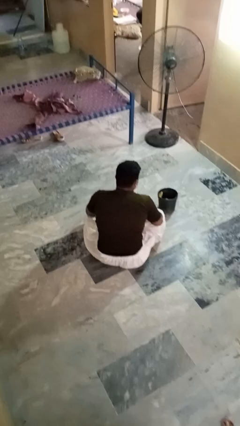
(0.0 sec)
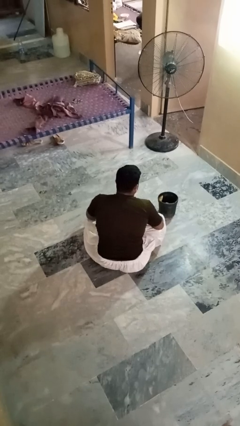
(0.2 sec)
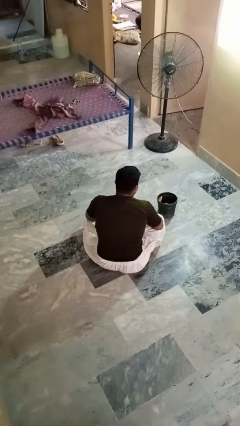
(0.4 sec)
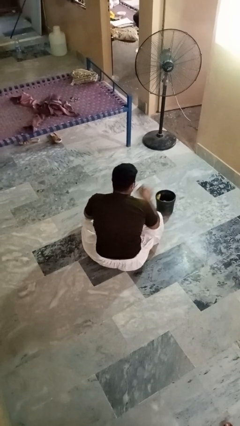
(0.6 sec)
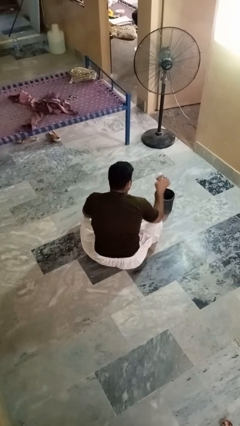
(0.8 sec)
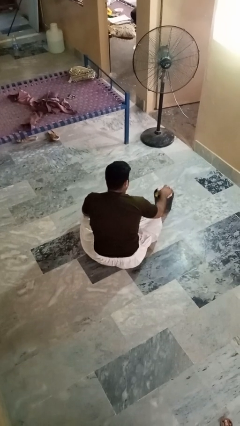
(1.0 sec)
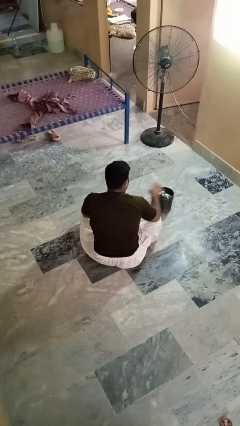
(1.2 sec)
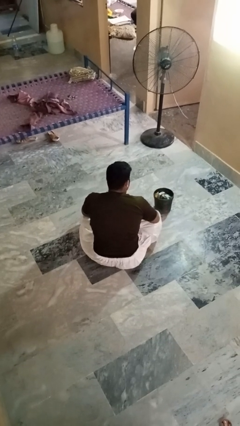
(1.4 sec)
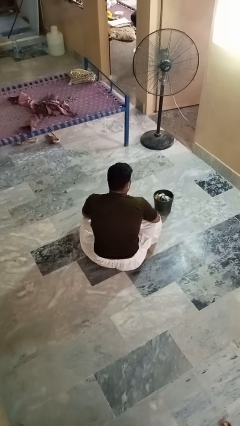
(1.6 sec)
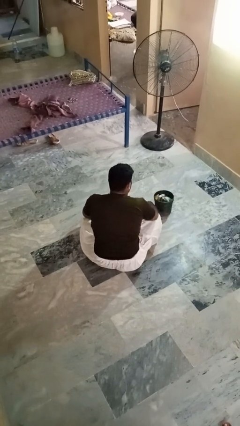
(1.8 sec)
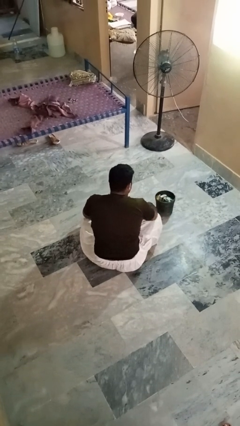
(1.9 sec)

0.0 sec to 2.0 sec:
person puts object into basket

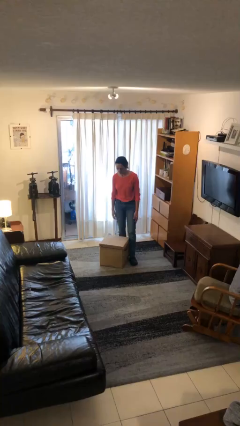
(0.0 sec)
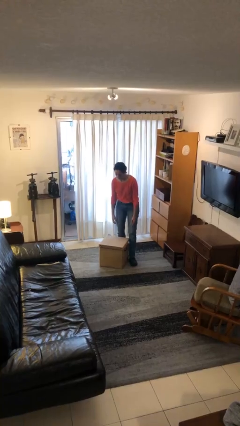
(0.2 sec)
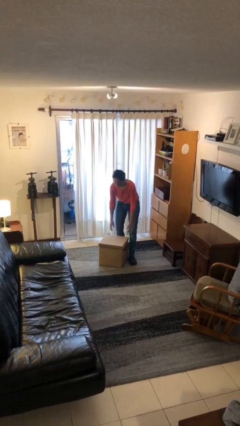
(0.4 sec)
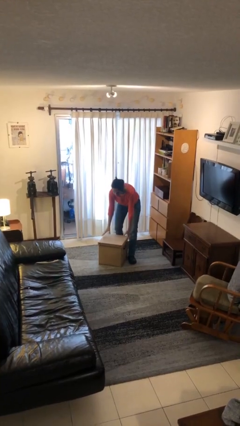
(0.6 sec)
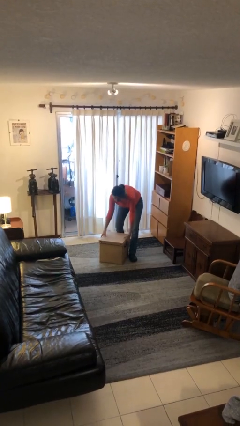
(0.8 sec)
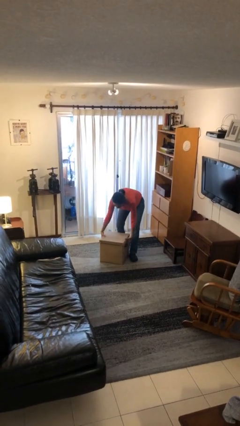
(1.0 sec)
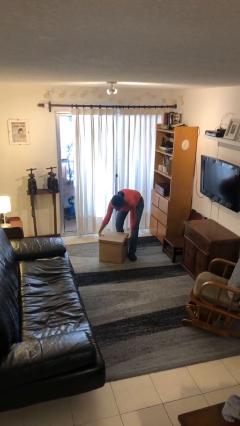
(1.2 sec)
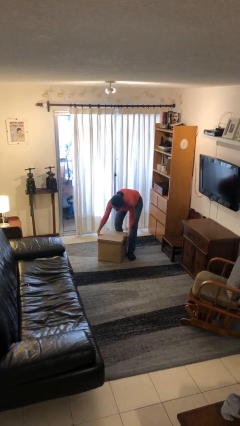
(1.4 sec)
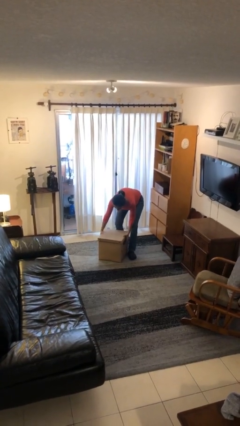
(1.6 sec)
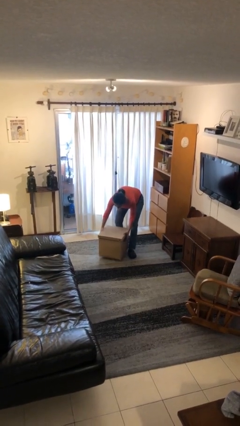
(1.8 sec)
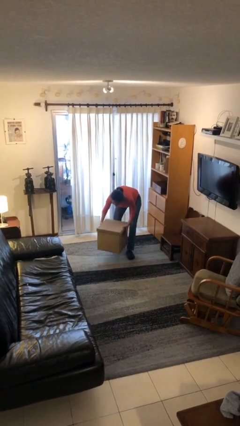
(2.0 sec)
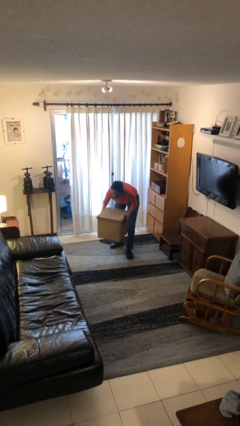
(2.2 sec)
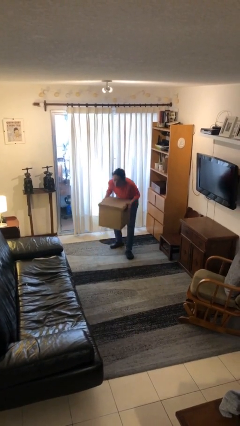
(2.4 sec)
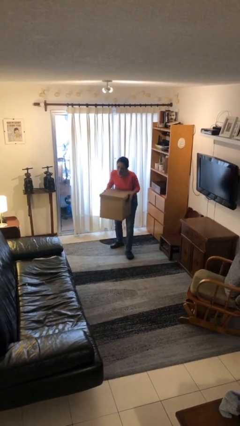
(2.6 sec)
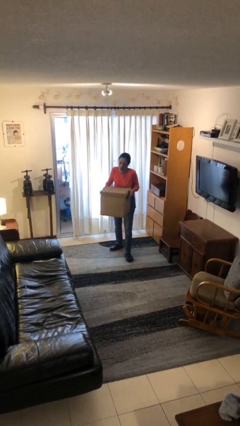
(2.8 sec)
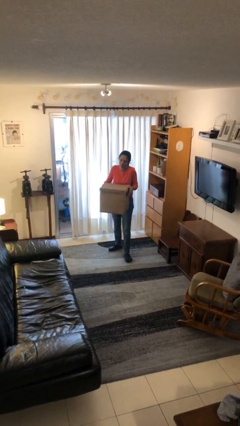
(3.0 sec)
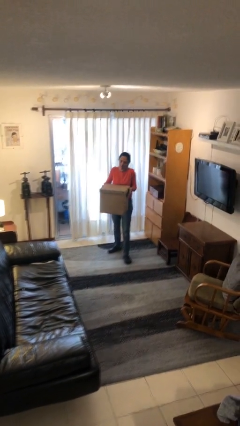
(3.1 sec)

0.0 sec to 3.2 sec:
person picks up object from floor

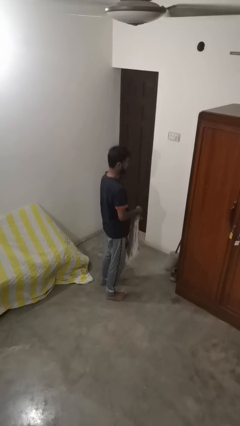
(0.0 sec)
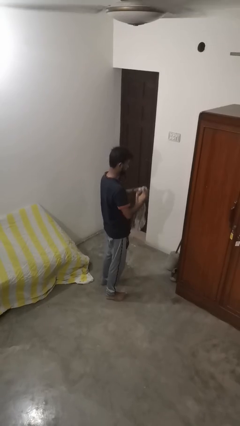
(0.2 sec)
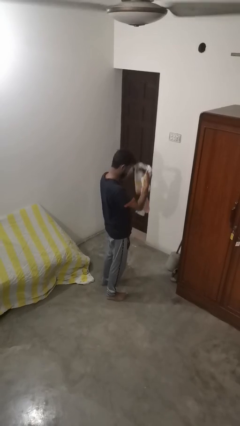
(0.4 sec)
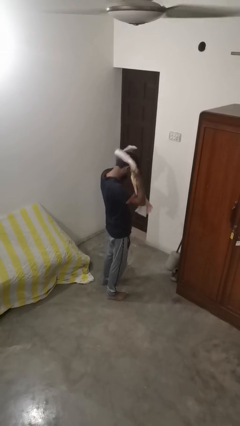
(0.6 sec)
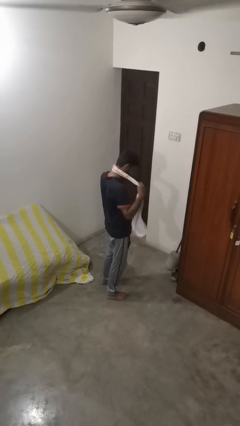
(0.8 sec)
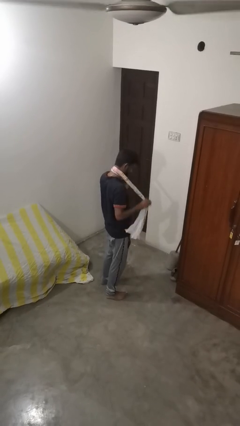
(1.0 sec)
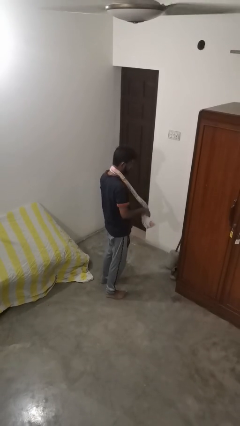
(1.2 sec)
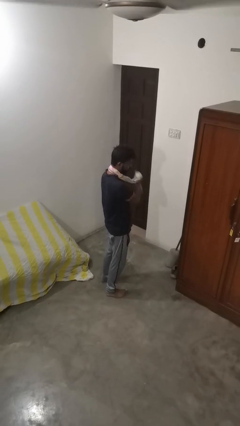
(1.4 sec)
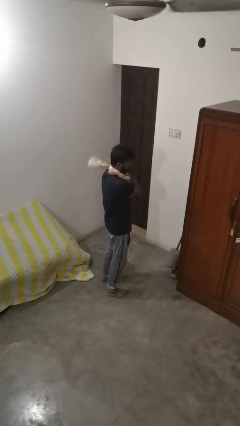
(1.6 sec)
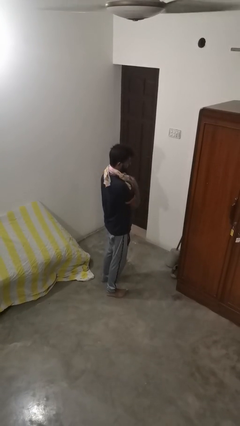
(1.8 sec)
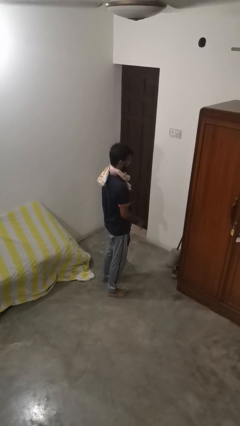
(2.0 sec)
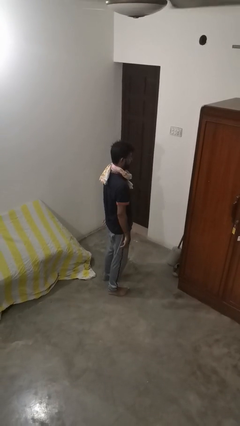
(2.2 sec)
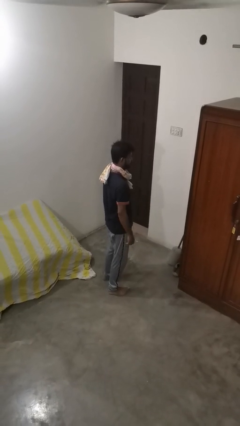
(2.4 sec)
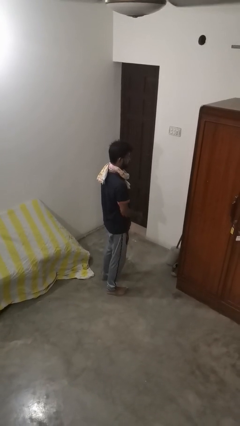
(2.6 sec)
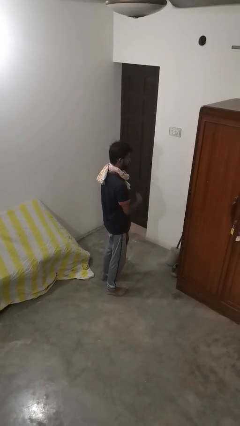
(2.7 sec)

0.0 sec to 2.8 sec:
person puts on scarf

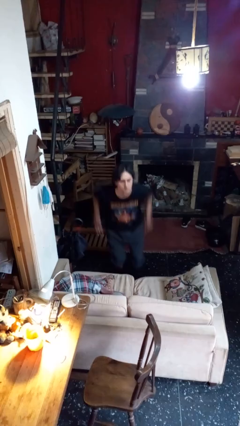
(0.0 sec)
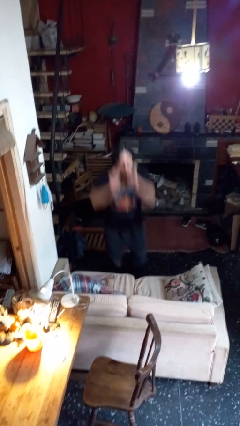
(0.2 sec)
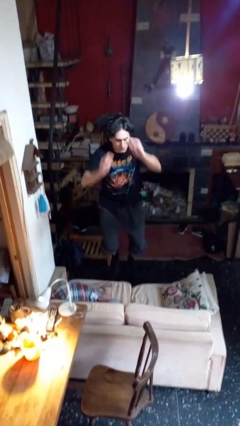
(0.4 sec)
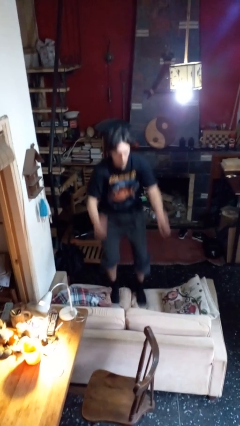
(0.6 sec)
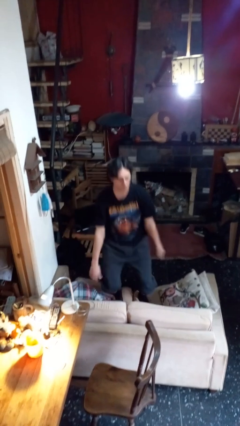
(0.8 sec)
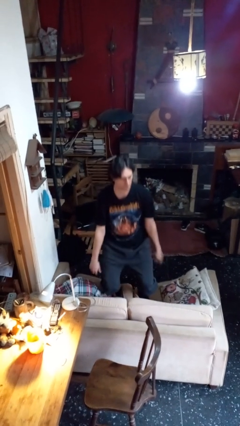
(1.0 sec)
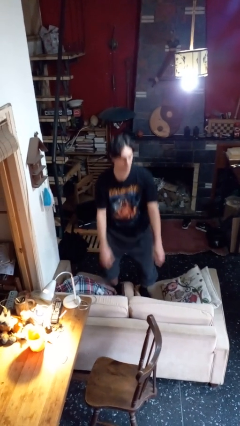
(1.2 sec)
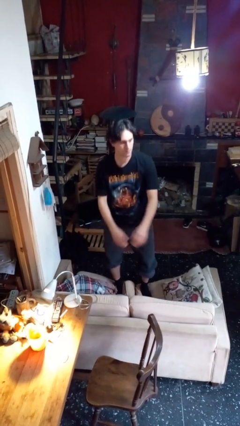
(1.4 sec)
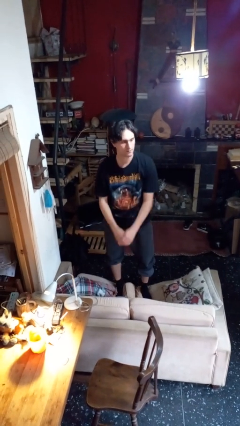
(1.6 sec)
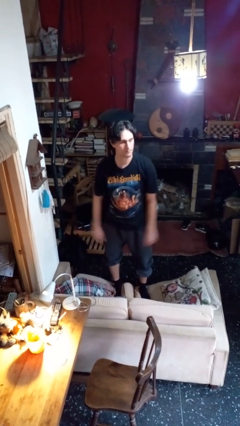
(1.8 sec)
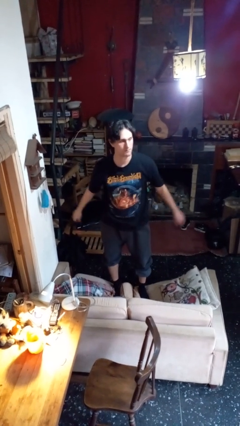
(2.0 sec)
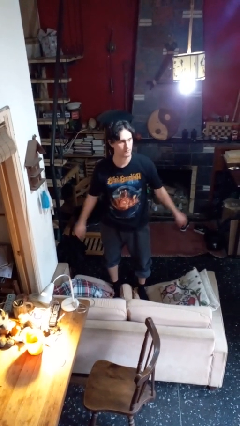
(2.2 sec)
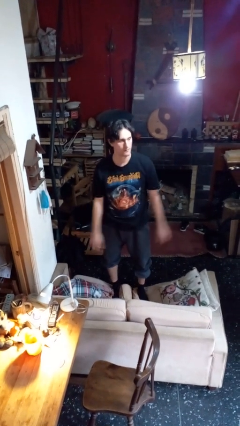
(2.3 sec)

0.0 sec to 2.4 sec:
person climbs on couch

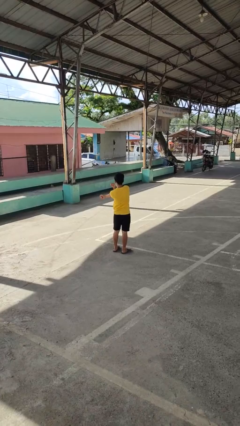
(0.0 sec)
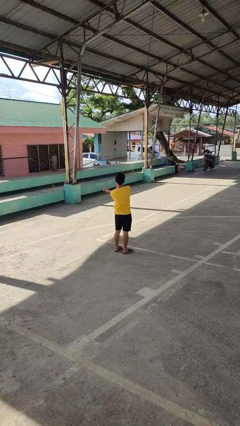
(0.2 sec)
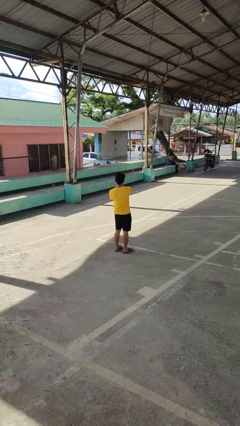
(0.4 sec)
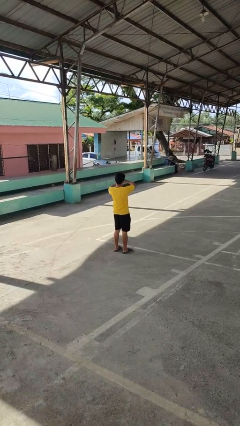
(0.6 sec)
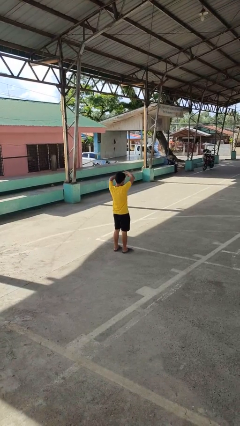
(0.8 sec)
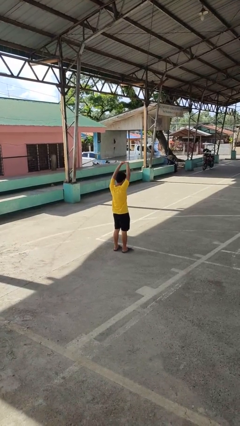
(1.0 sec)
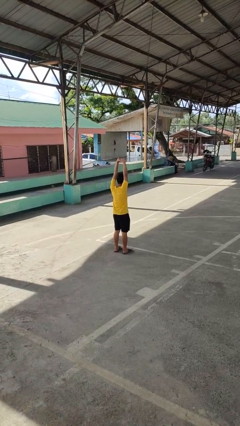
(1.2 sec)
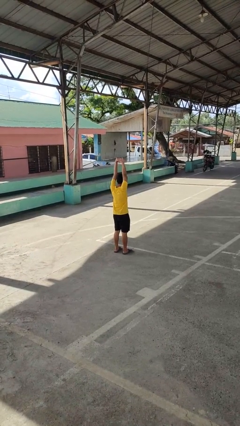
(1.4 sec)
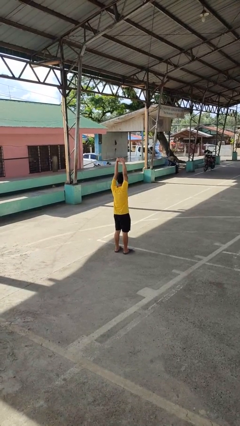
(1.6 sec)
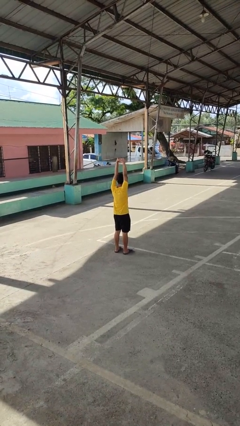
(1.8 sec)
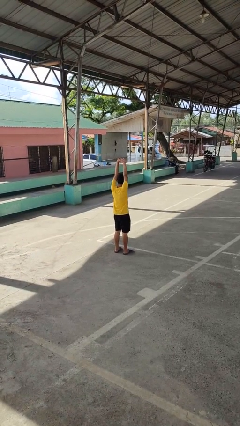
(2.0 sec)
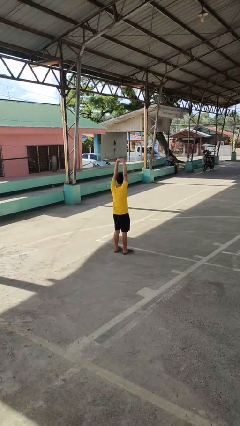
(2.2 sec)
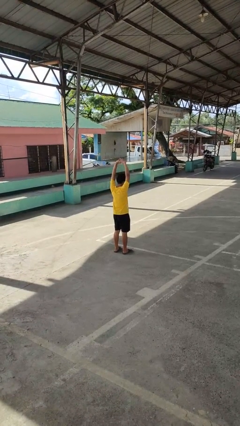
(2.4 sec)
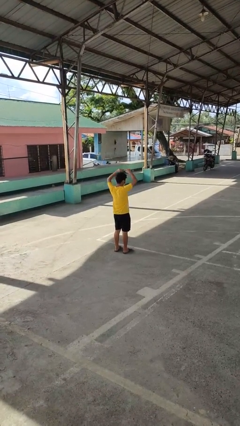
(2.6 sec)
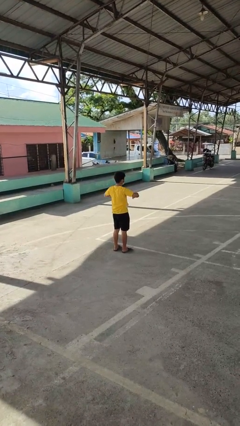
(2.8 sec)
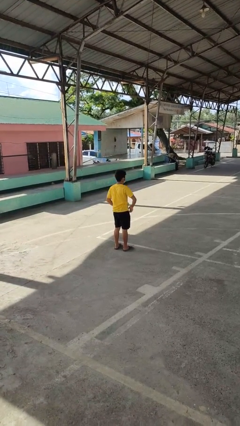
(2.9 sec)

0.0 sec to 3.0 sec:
person stretches arms over head

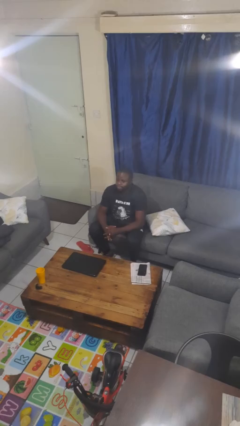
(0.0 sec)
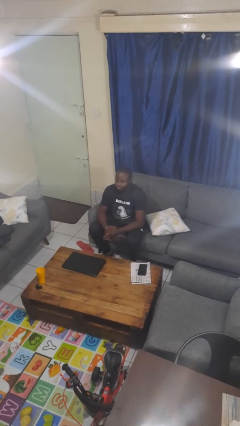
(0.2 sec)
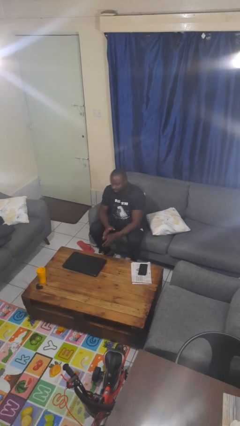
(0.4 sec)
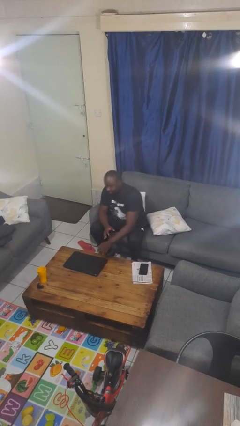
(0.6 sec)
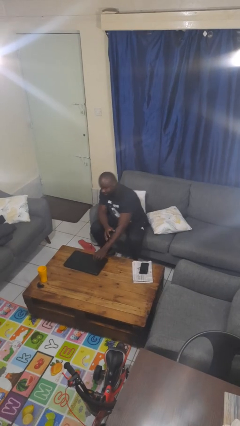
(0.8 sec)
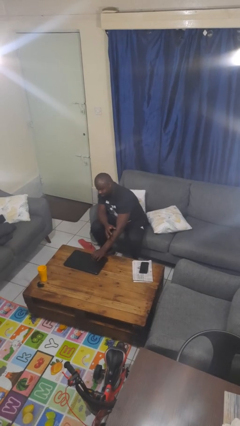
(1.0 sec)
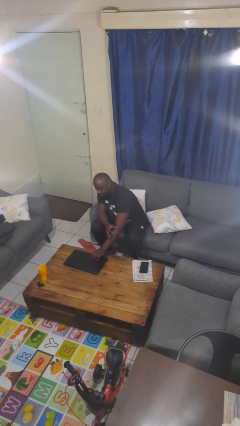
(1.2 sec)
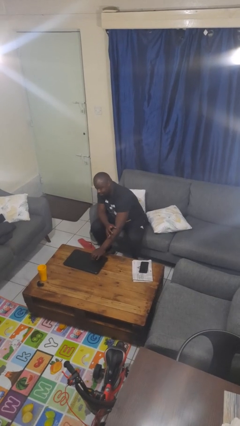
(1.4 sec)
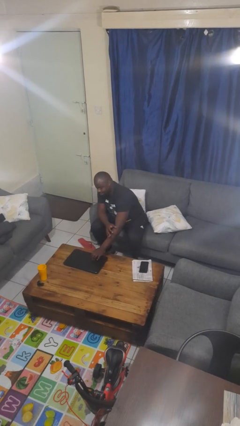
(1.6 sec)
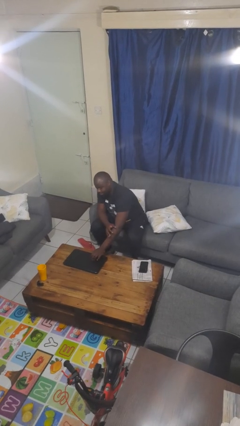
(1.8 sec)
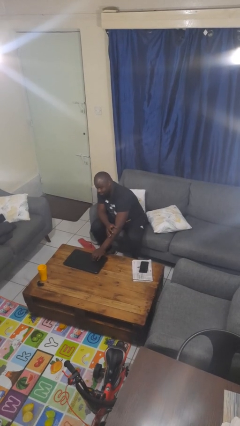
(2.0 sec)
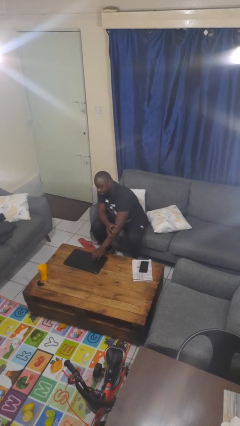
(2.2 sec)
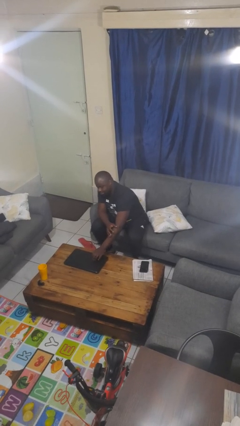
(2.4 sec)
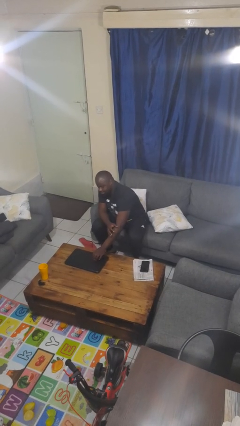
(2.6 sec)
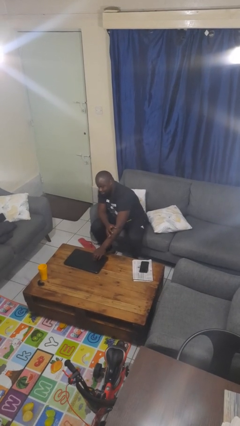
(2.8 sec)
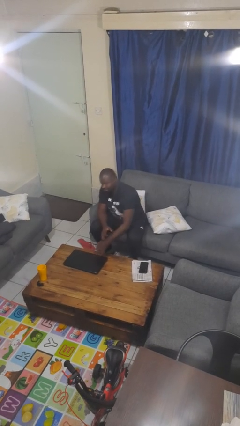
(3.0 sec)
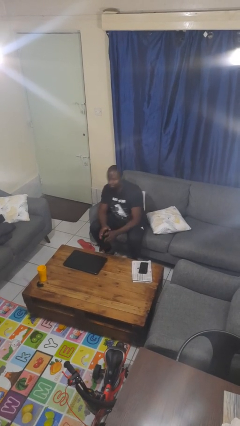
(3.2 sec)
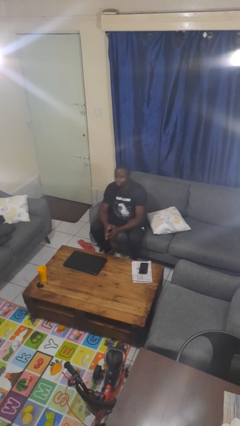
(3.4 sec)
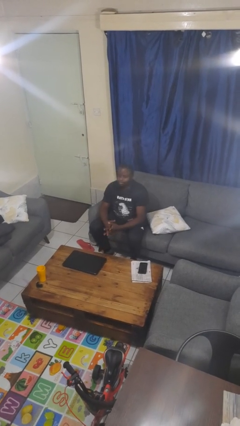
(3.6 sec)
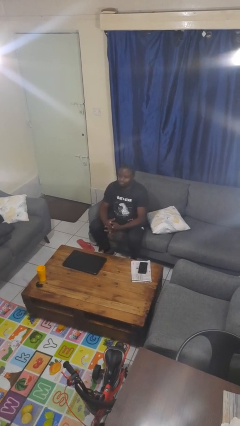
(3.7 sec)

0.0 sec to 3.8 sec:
person taps object with finger

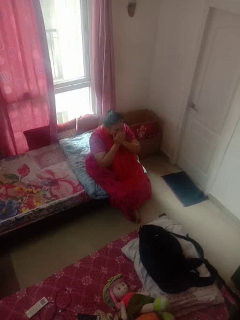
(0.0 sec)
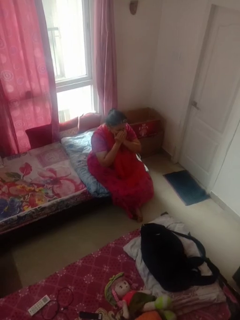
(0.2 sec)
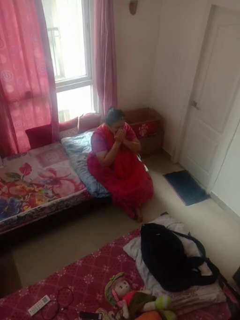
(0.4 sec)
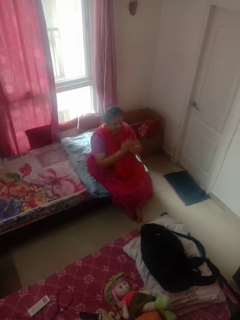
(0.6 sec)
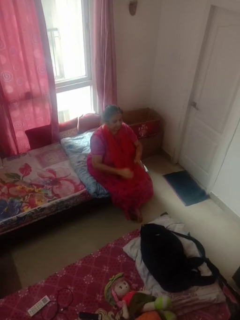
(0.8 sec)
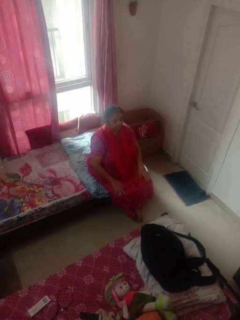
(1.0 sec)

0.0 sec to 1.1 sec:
person sneezes into hand
